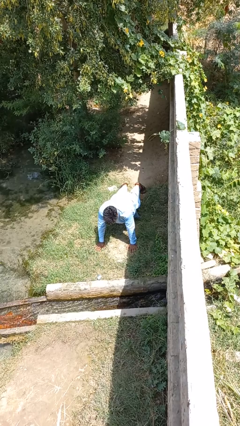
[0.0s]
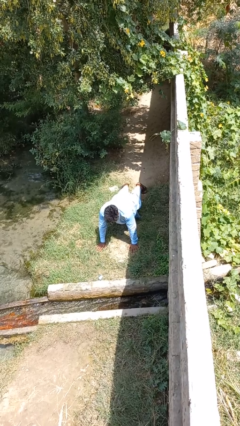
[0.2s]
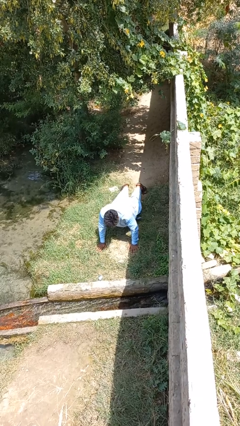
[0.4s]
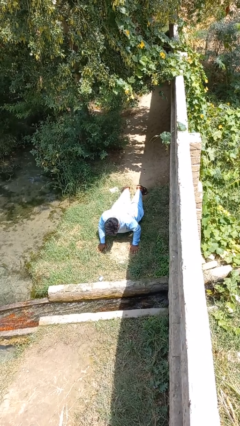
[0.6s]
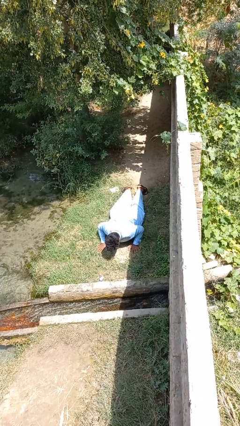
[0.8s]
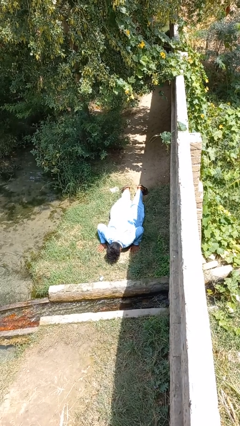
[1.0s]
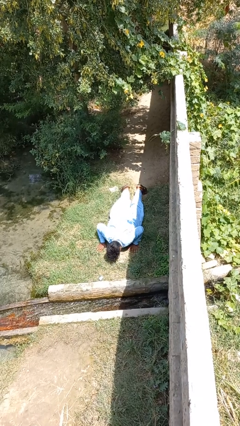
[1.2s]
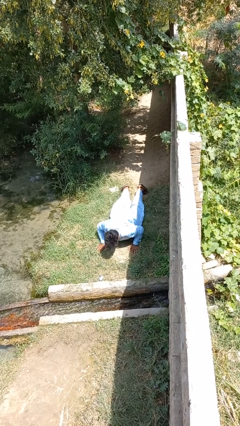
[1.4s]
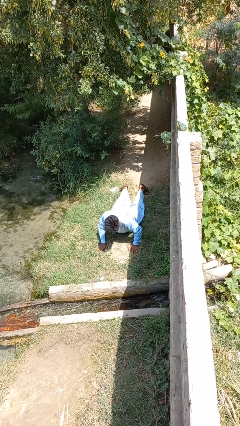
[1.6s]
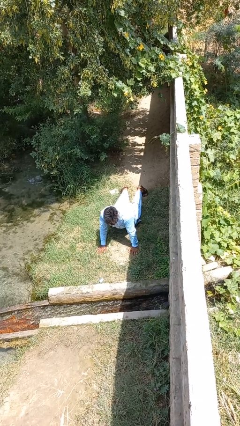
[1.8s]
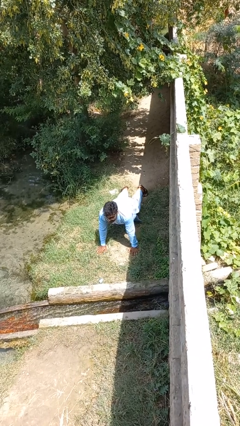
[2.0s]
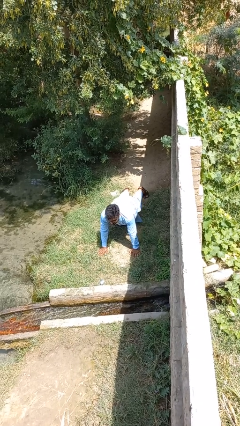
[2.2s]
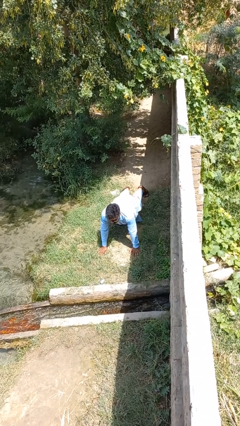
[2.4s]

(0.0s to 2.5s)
person exercises with pushup

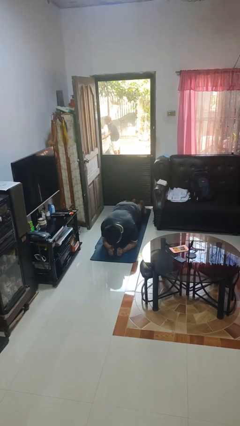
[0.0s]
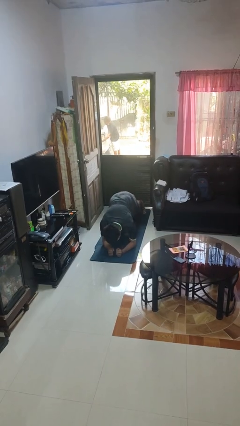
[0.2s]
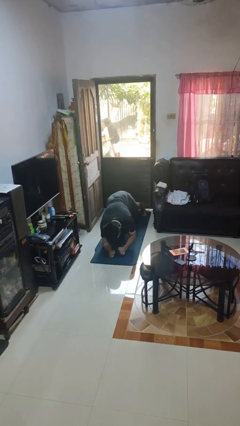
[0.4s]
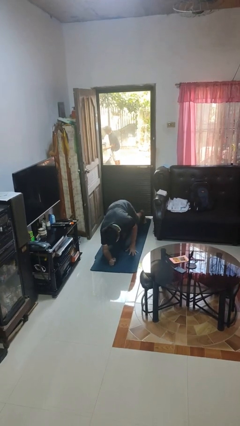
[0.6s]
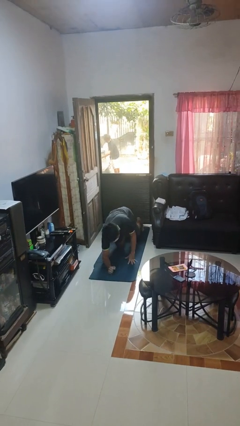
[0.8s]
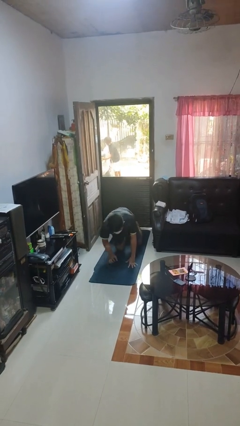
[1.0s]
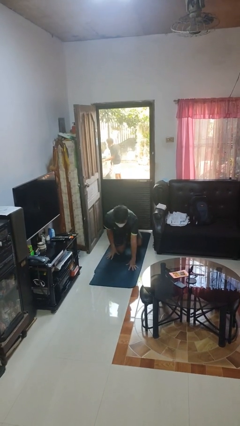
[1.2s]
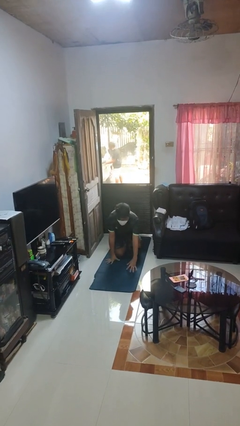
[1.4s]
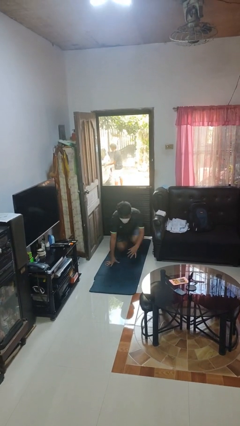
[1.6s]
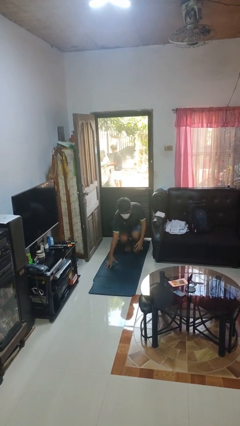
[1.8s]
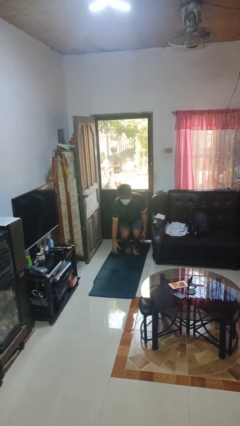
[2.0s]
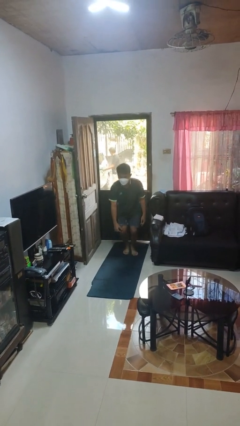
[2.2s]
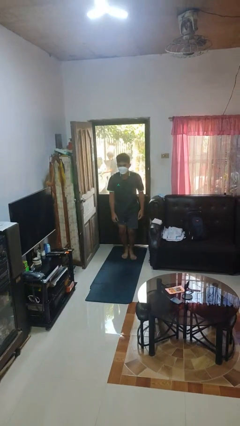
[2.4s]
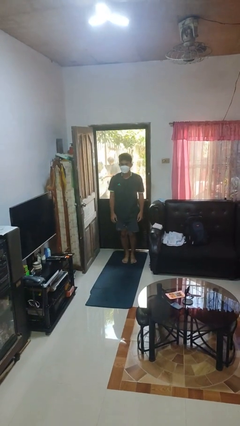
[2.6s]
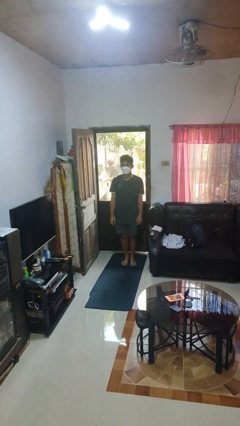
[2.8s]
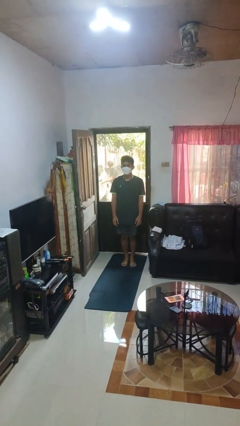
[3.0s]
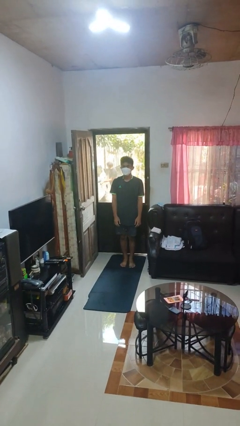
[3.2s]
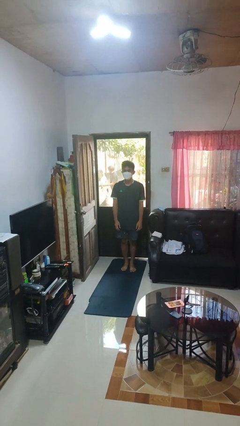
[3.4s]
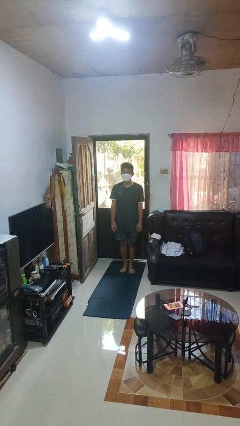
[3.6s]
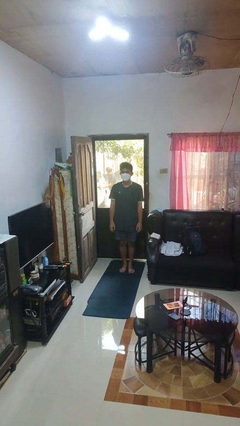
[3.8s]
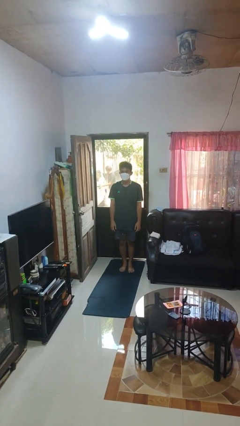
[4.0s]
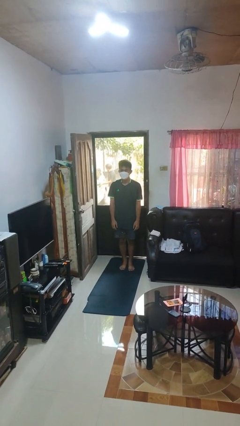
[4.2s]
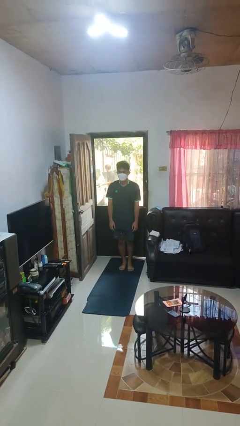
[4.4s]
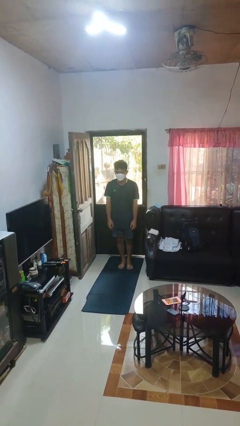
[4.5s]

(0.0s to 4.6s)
person stands up from floor

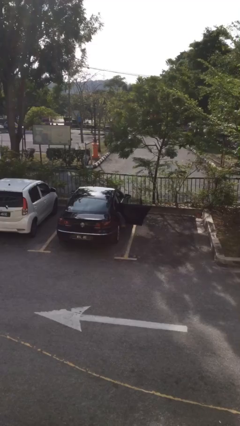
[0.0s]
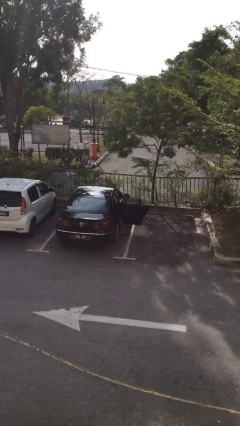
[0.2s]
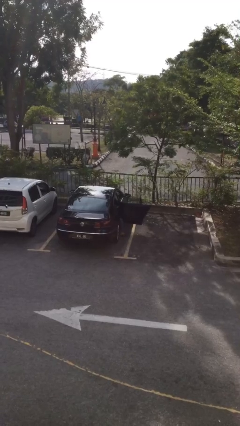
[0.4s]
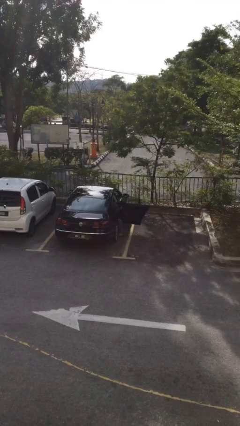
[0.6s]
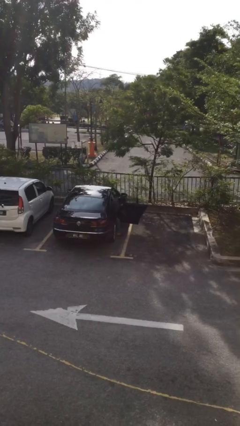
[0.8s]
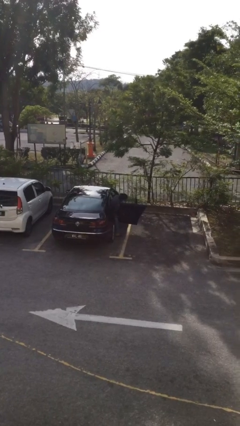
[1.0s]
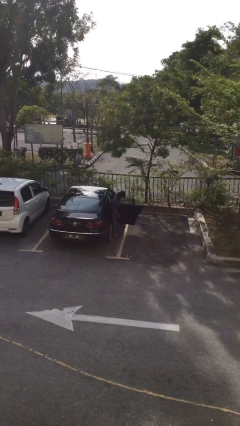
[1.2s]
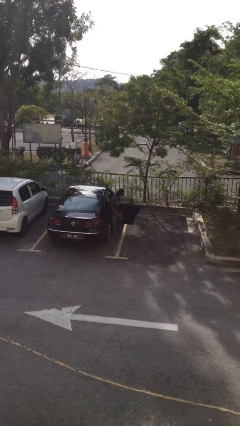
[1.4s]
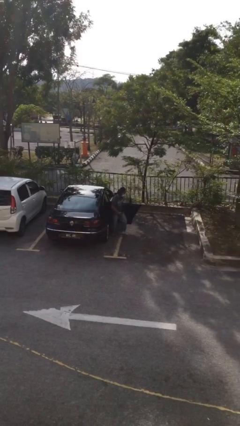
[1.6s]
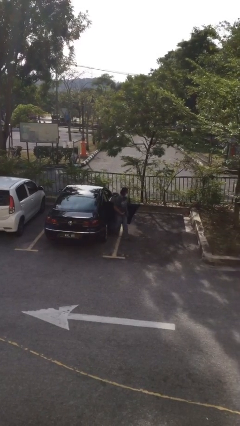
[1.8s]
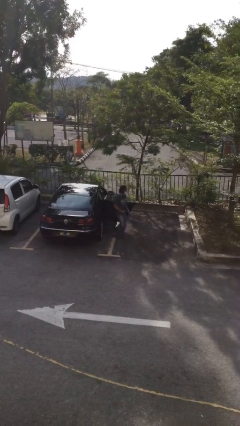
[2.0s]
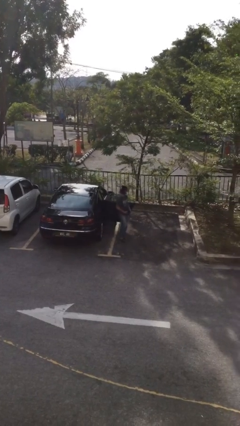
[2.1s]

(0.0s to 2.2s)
person exits car

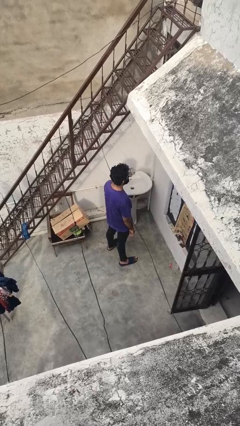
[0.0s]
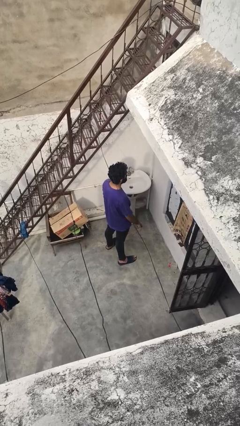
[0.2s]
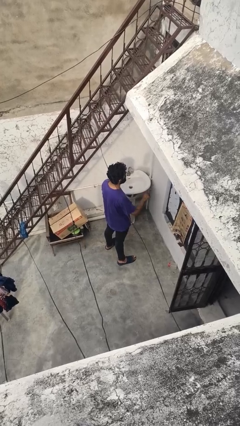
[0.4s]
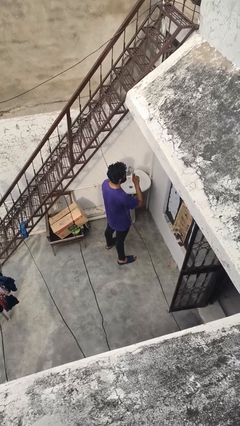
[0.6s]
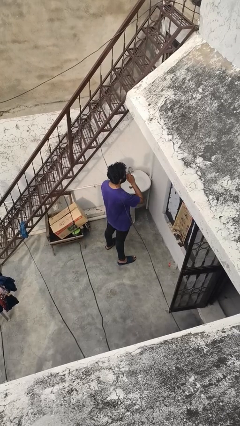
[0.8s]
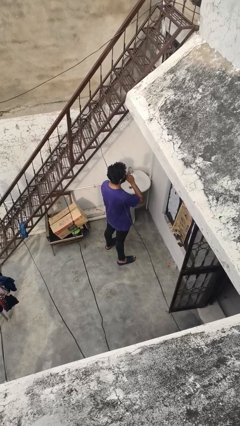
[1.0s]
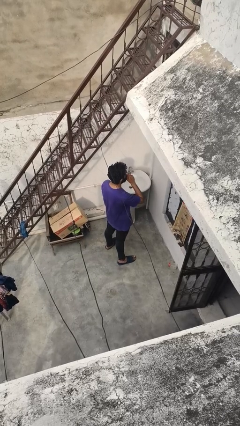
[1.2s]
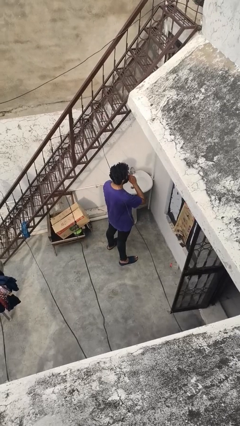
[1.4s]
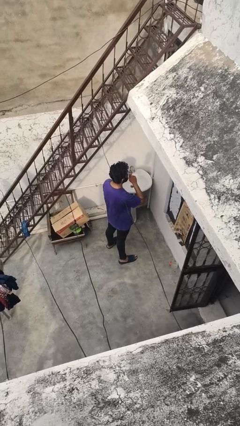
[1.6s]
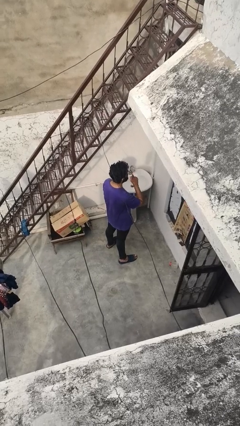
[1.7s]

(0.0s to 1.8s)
person gestures be quiet

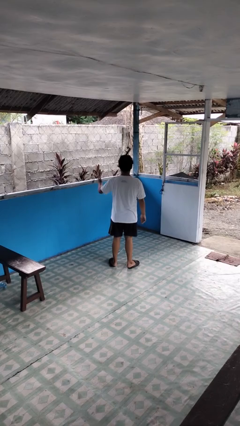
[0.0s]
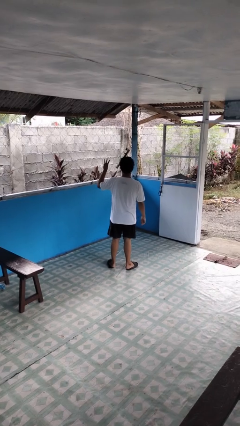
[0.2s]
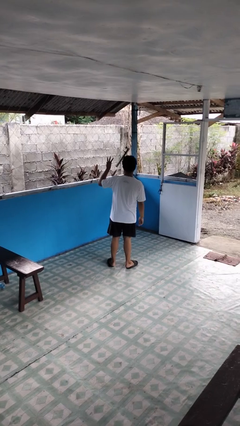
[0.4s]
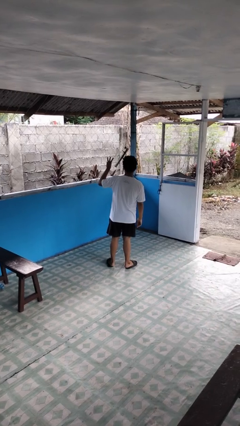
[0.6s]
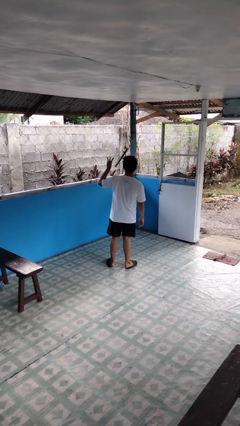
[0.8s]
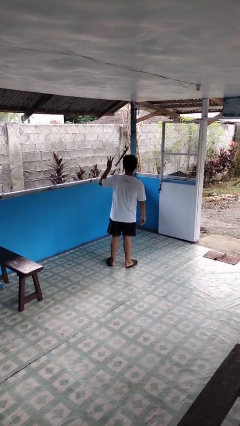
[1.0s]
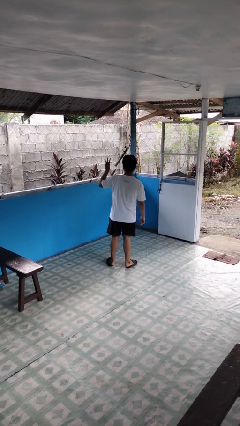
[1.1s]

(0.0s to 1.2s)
person gestures number three

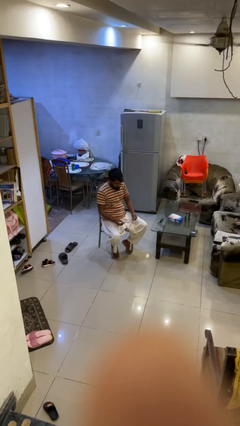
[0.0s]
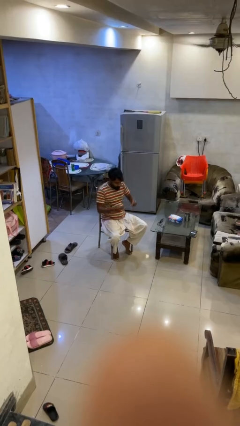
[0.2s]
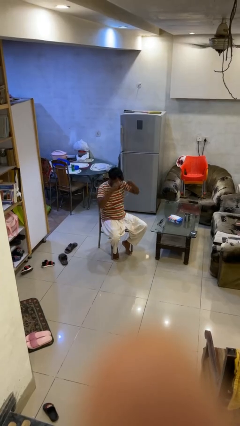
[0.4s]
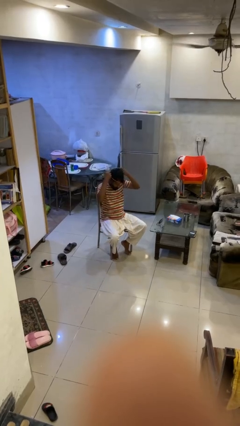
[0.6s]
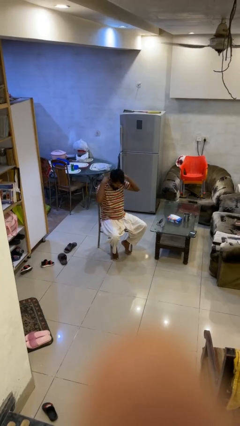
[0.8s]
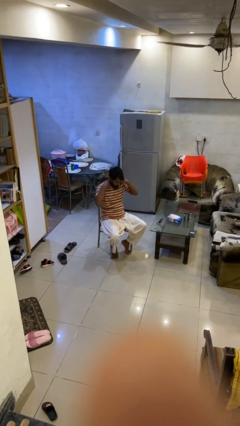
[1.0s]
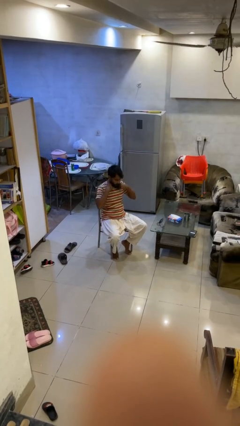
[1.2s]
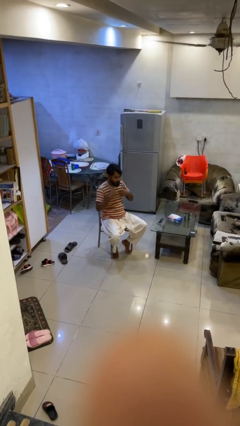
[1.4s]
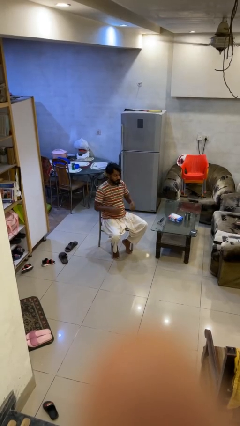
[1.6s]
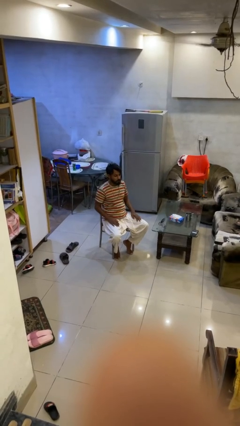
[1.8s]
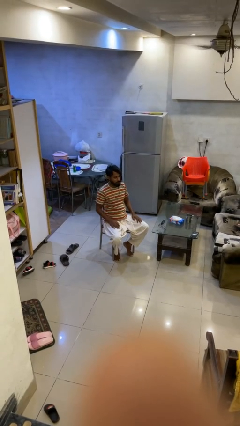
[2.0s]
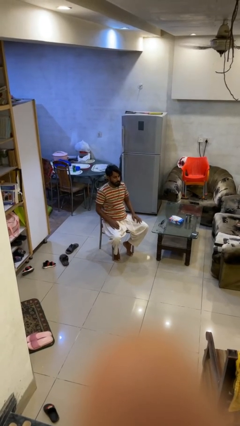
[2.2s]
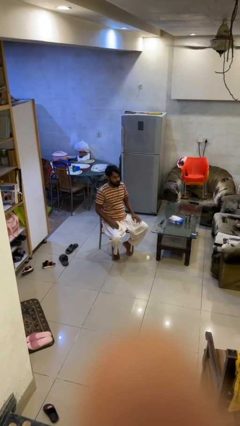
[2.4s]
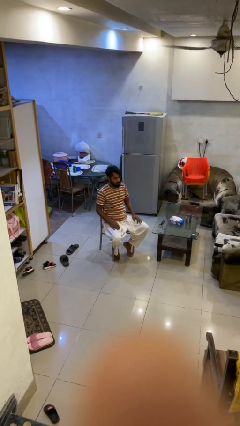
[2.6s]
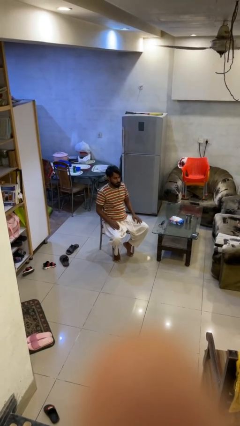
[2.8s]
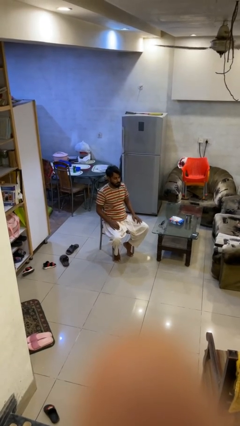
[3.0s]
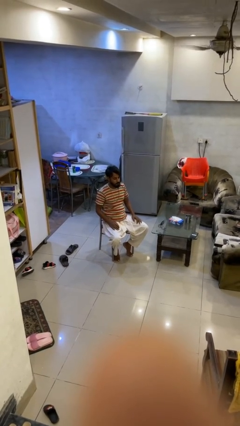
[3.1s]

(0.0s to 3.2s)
person puts on necklace

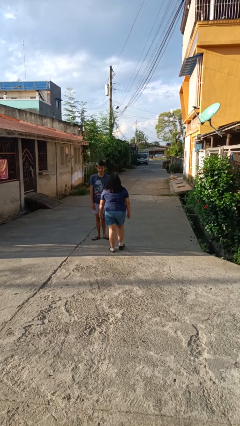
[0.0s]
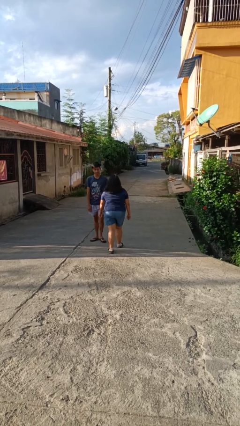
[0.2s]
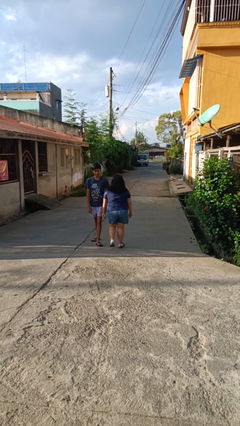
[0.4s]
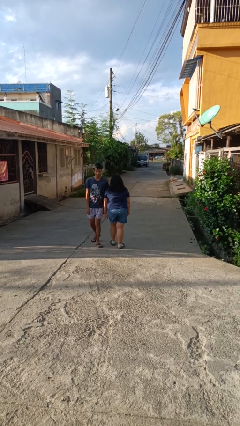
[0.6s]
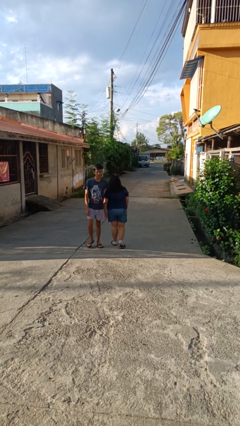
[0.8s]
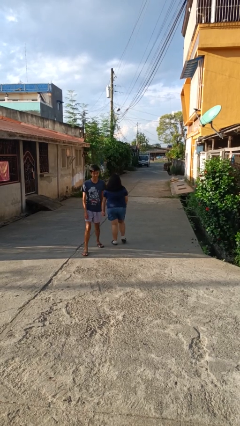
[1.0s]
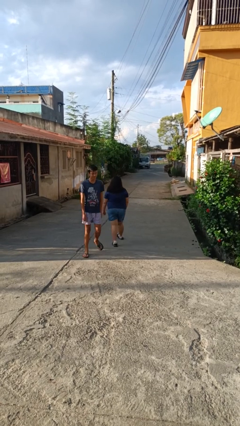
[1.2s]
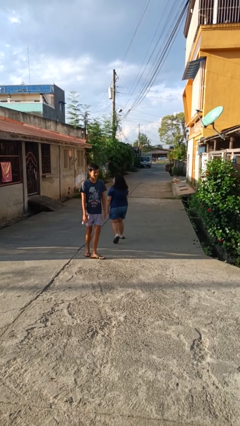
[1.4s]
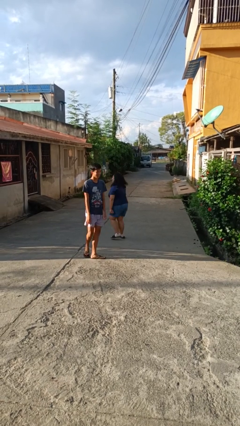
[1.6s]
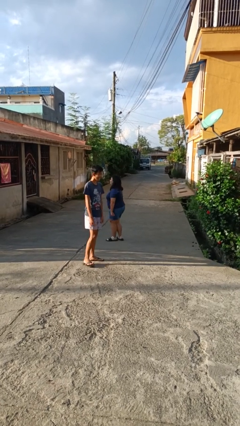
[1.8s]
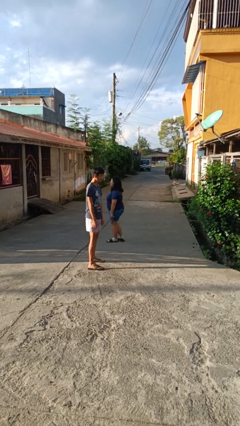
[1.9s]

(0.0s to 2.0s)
person bumps into person
